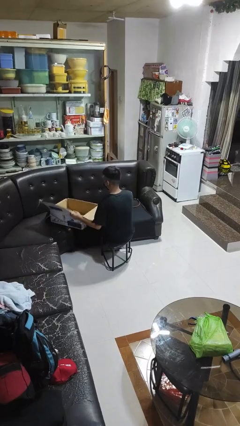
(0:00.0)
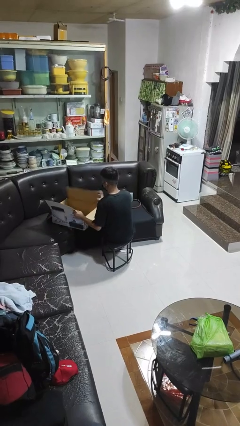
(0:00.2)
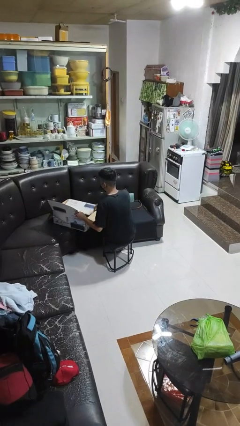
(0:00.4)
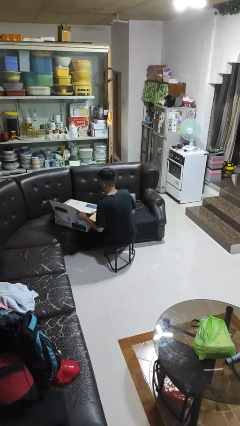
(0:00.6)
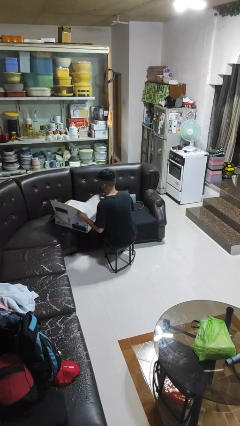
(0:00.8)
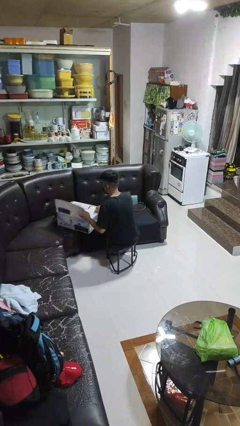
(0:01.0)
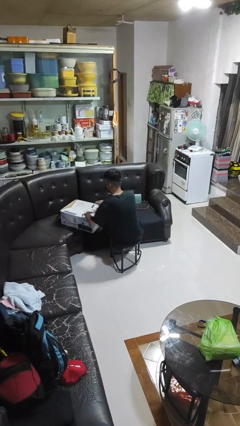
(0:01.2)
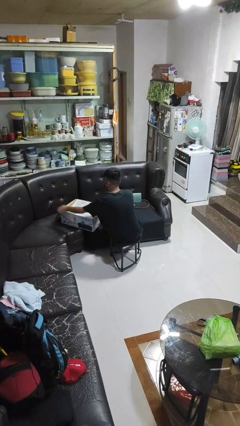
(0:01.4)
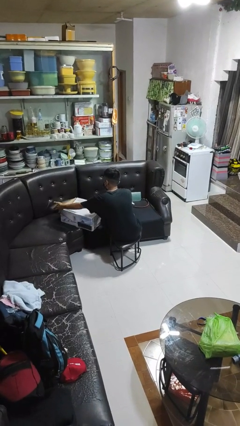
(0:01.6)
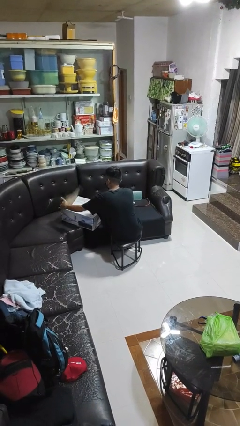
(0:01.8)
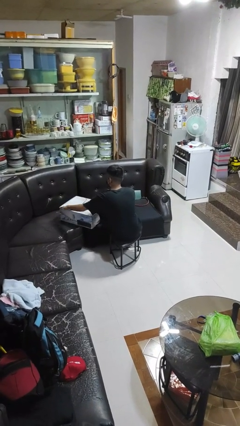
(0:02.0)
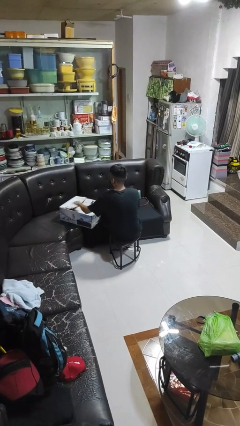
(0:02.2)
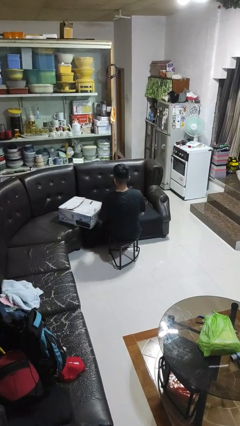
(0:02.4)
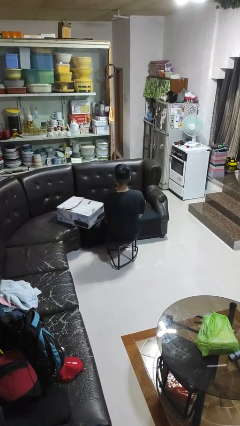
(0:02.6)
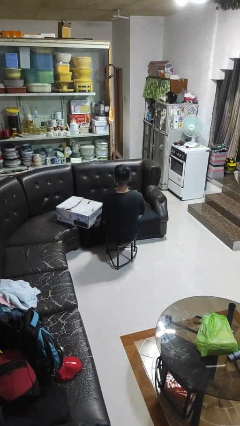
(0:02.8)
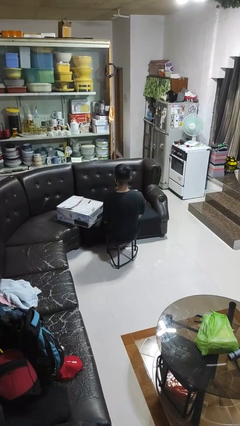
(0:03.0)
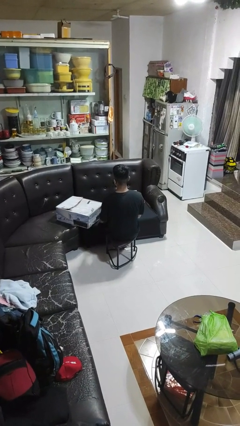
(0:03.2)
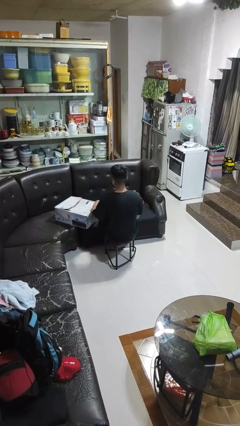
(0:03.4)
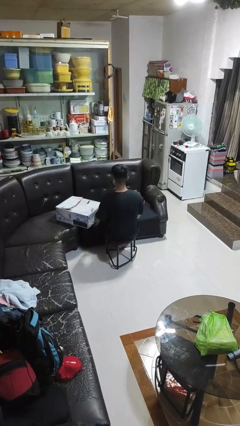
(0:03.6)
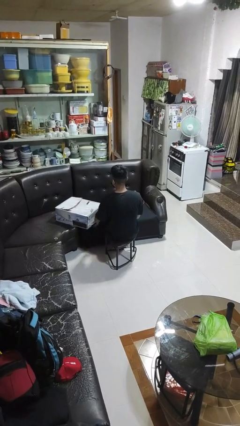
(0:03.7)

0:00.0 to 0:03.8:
person closes box

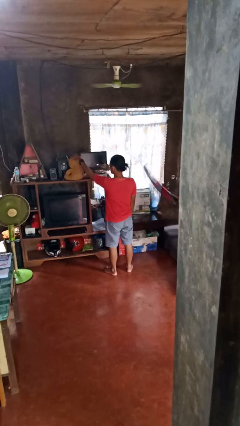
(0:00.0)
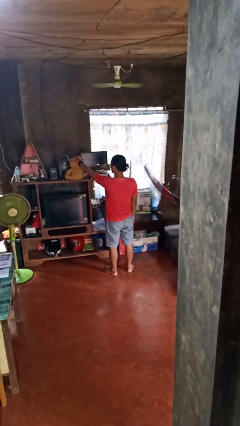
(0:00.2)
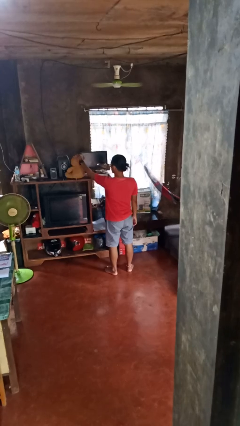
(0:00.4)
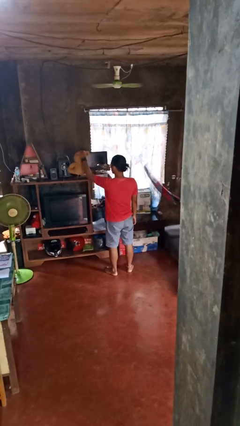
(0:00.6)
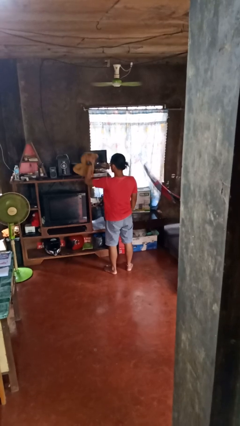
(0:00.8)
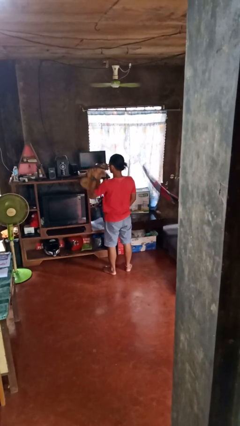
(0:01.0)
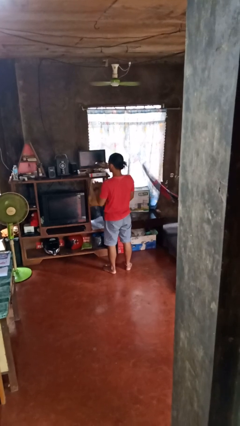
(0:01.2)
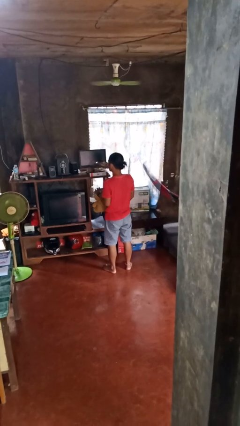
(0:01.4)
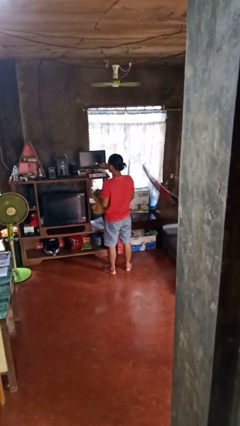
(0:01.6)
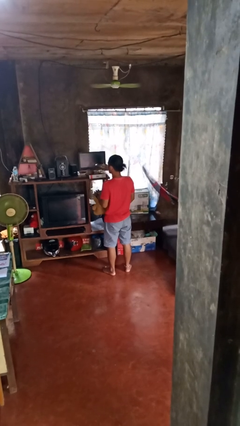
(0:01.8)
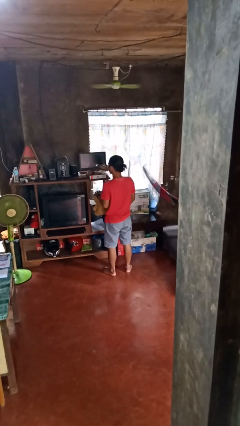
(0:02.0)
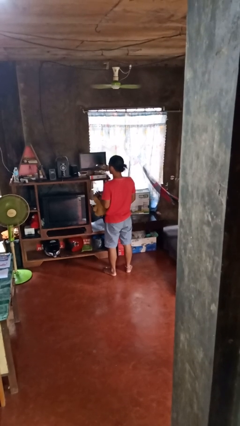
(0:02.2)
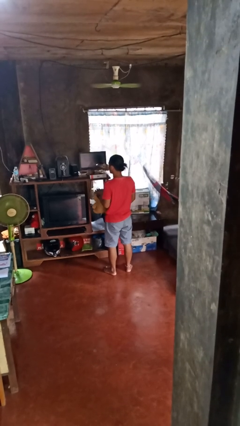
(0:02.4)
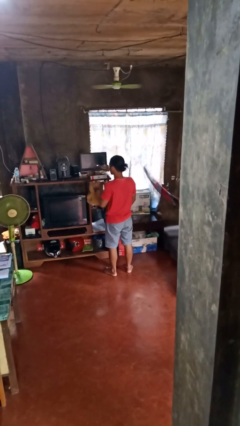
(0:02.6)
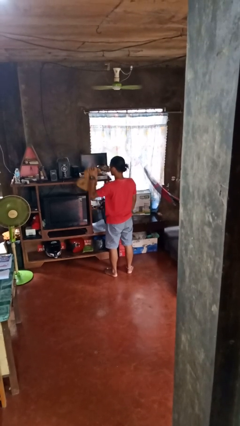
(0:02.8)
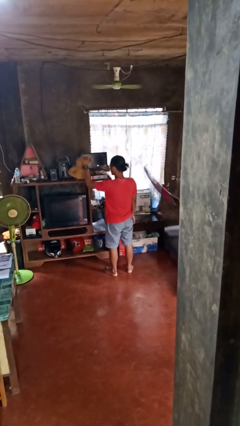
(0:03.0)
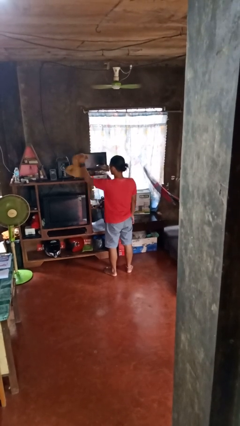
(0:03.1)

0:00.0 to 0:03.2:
person picks up object from shelf

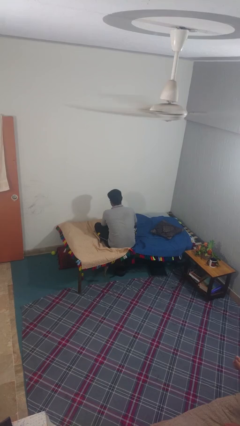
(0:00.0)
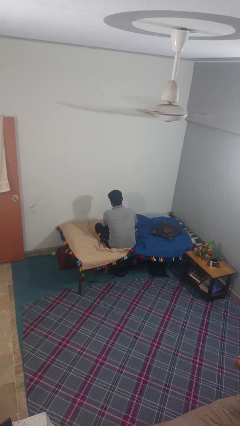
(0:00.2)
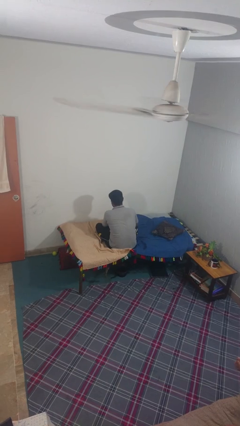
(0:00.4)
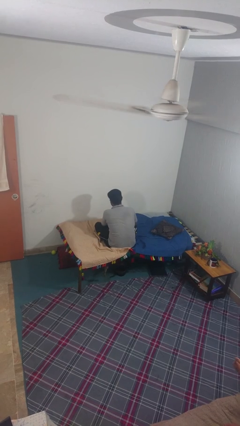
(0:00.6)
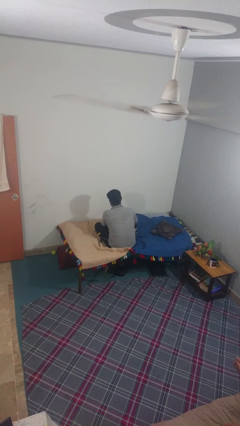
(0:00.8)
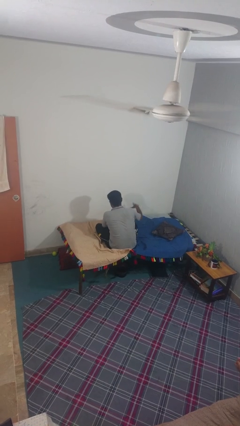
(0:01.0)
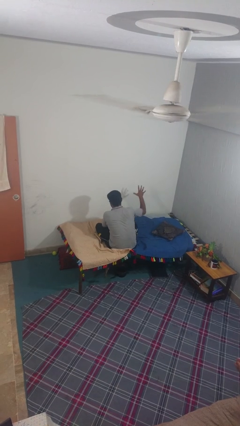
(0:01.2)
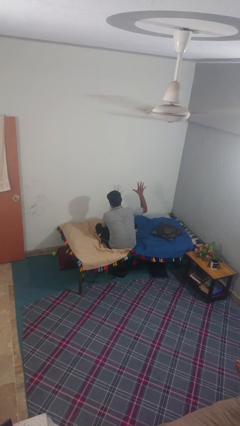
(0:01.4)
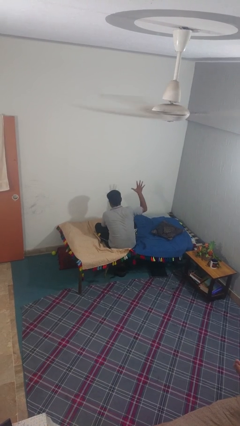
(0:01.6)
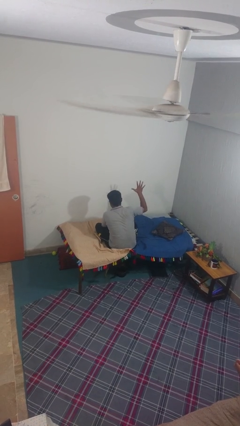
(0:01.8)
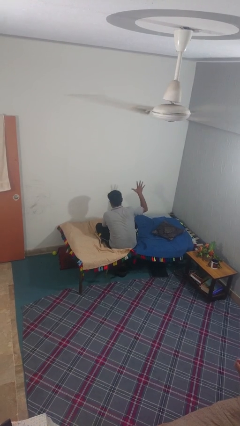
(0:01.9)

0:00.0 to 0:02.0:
person gestures number five

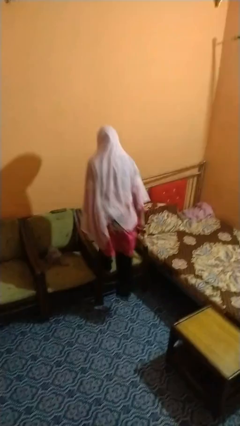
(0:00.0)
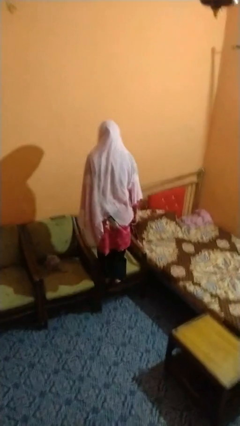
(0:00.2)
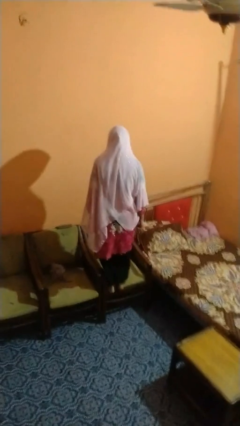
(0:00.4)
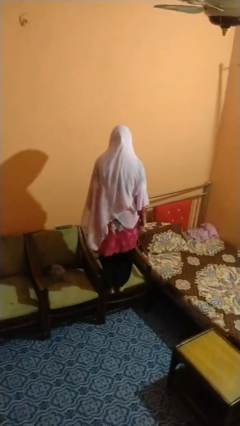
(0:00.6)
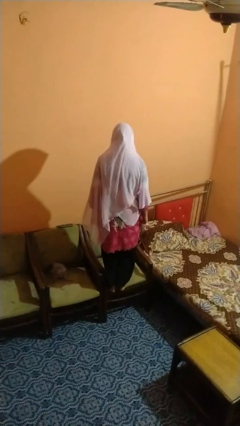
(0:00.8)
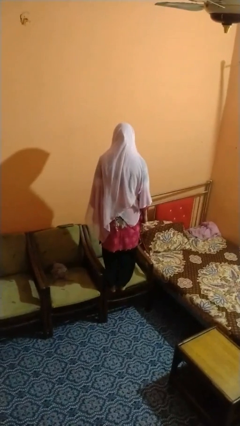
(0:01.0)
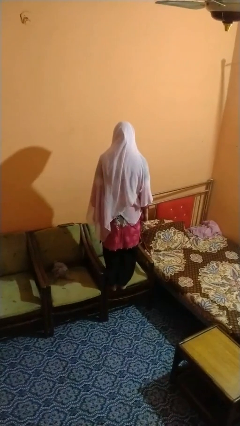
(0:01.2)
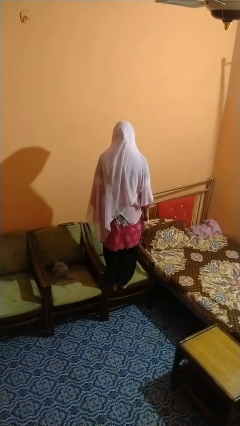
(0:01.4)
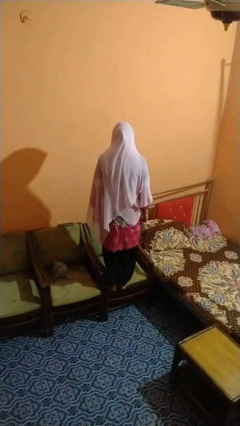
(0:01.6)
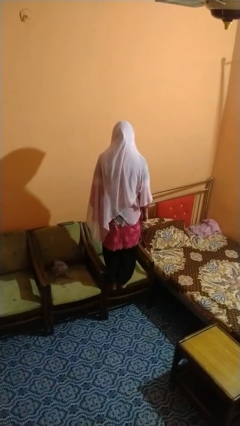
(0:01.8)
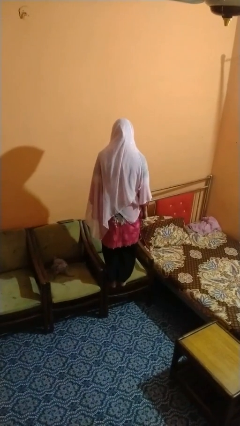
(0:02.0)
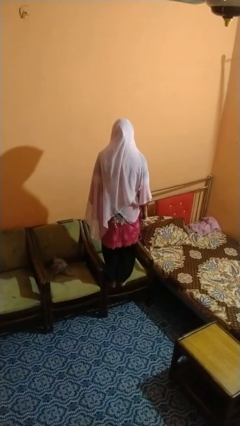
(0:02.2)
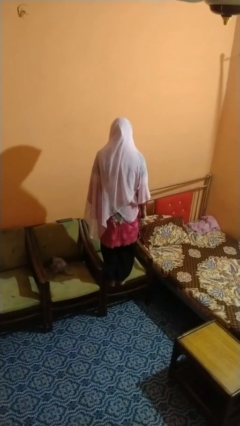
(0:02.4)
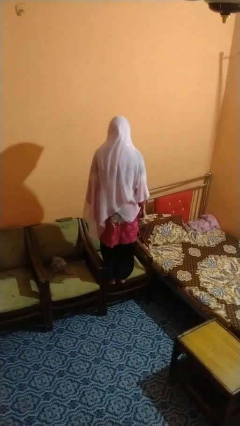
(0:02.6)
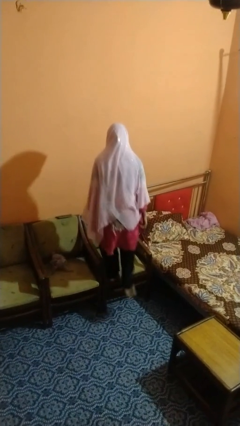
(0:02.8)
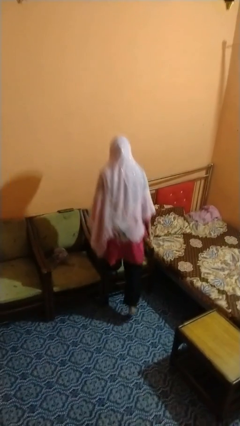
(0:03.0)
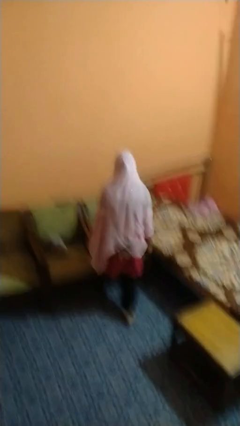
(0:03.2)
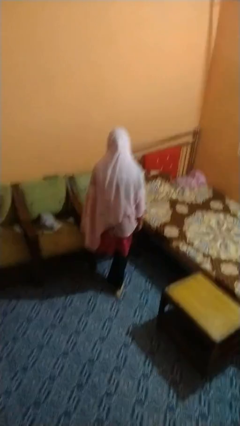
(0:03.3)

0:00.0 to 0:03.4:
person climbs on chair

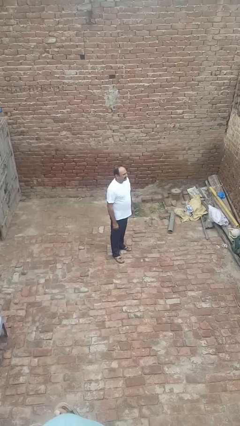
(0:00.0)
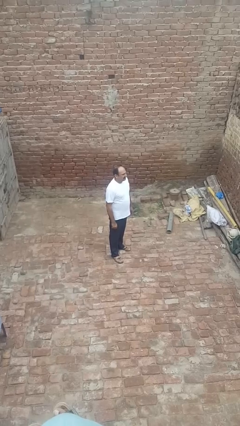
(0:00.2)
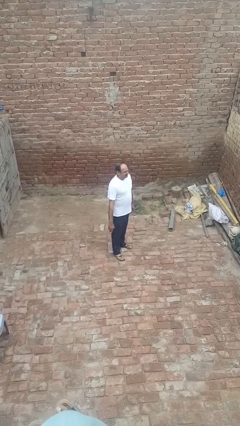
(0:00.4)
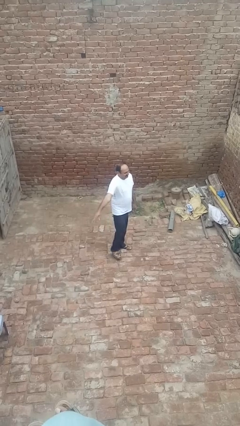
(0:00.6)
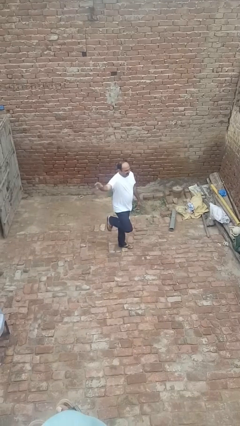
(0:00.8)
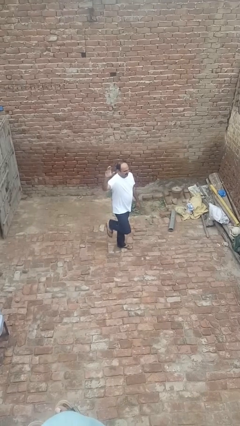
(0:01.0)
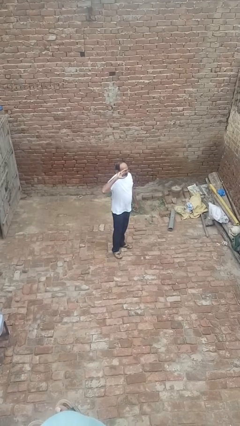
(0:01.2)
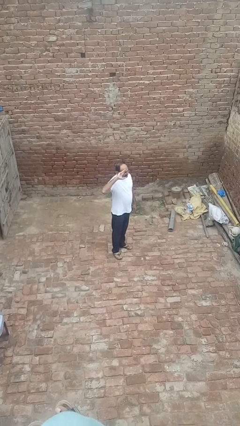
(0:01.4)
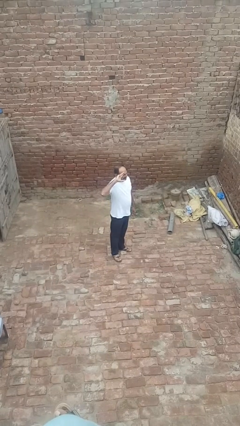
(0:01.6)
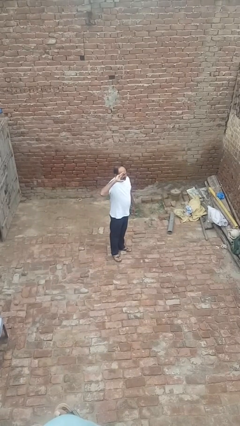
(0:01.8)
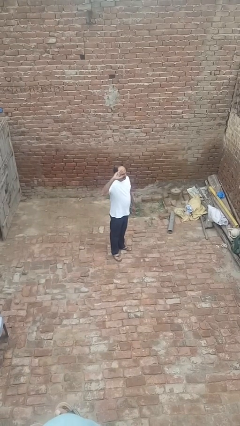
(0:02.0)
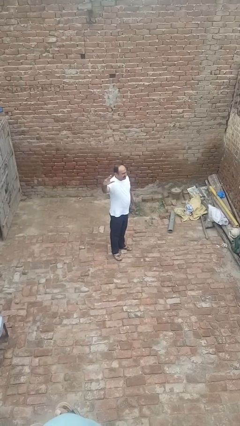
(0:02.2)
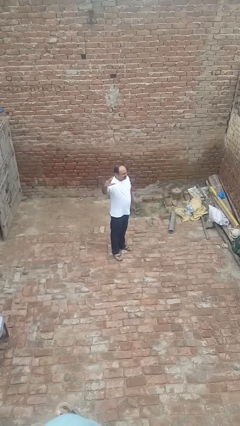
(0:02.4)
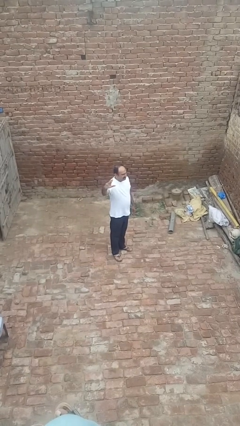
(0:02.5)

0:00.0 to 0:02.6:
person salutes

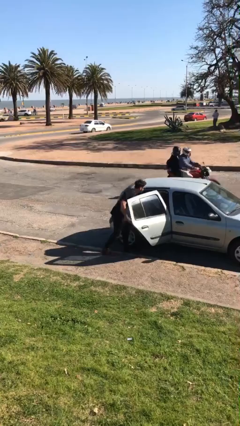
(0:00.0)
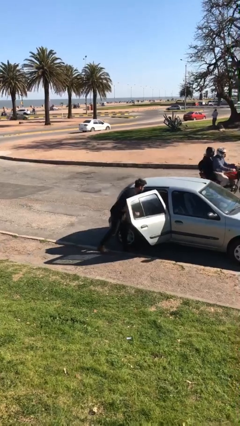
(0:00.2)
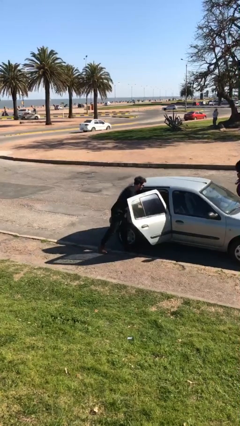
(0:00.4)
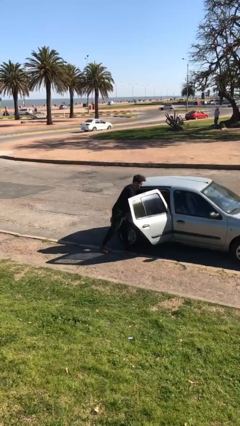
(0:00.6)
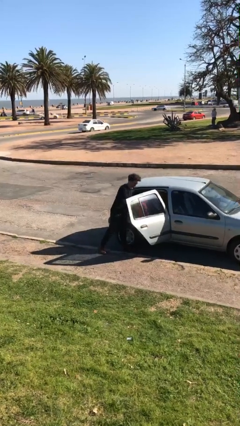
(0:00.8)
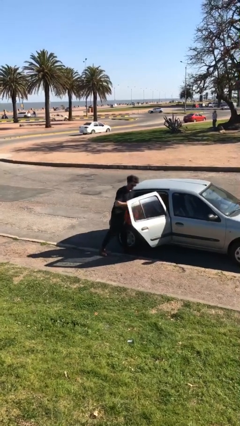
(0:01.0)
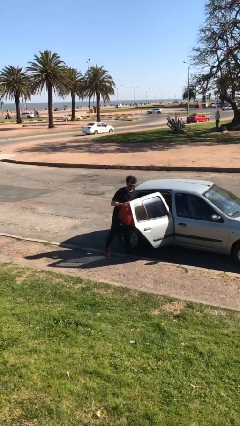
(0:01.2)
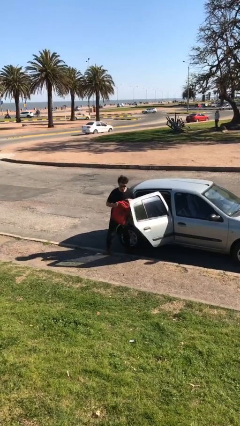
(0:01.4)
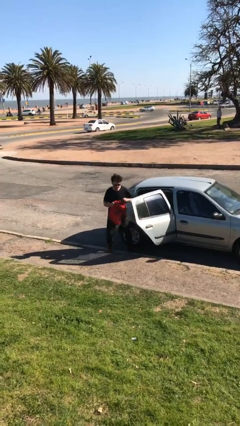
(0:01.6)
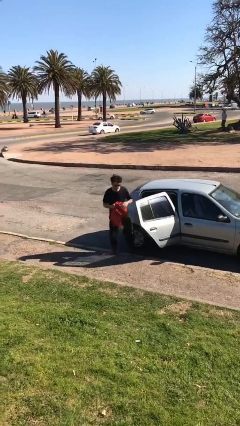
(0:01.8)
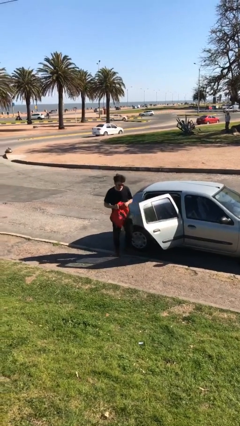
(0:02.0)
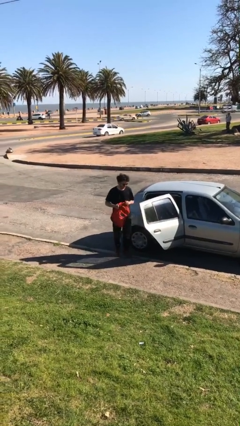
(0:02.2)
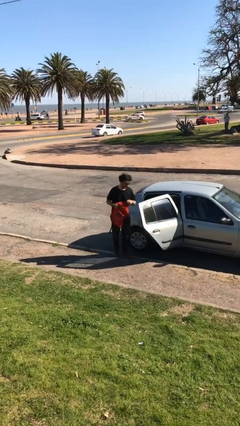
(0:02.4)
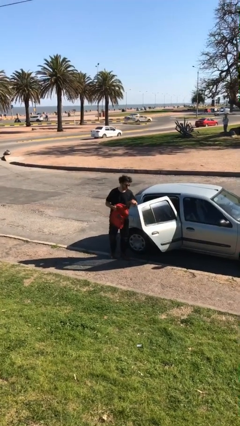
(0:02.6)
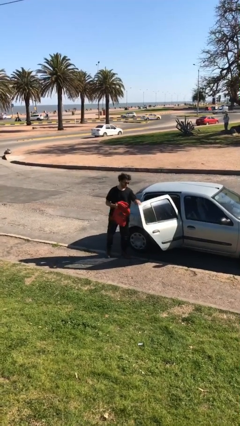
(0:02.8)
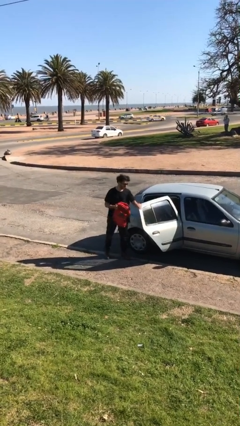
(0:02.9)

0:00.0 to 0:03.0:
person unloads car
